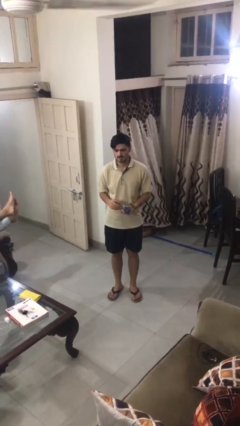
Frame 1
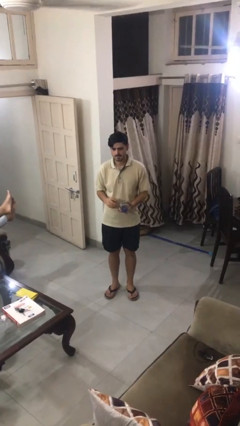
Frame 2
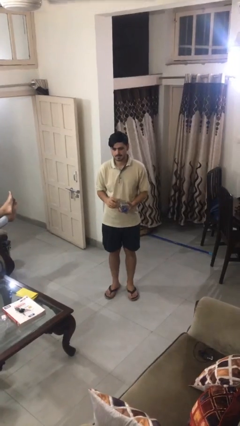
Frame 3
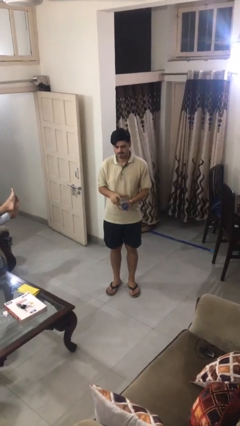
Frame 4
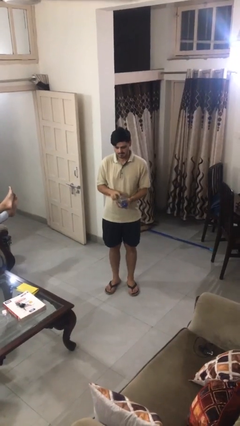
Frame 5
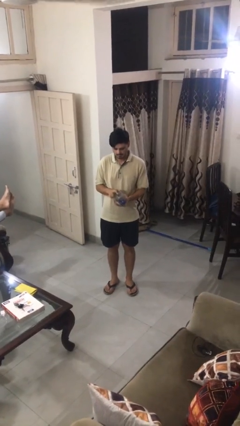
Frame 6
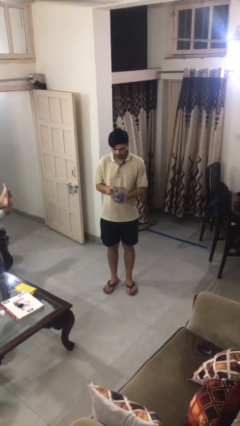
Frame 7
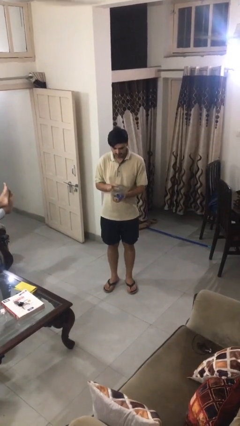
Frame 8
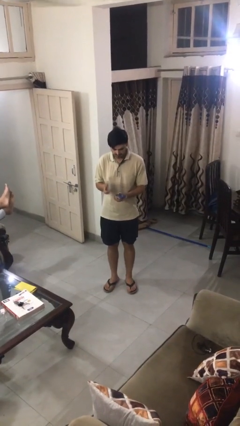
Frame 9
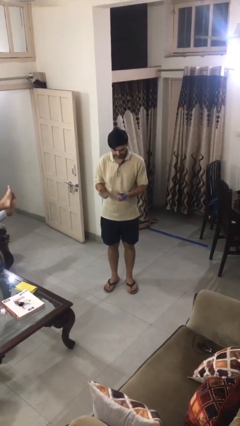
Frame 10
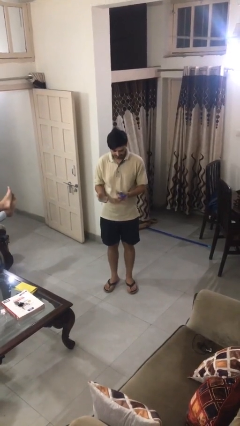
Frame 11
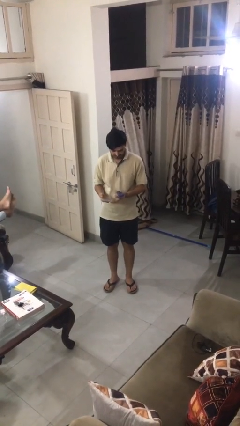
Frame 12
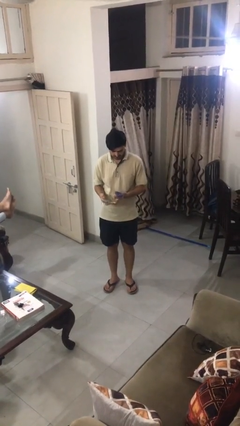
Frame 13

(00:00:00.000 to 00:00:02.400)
person opens jewelry box

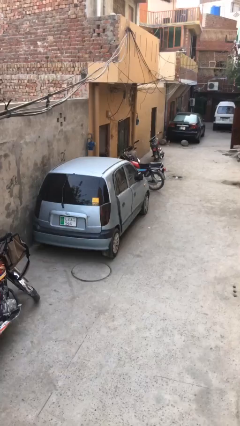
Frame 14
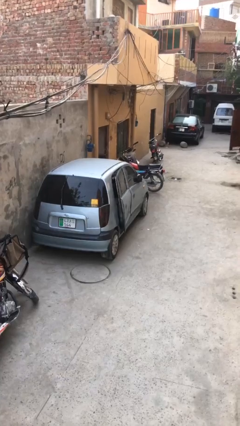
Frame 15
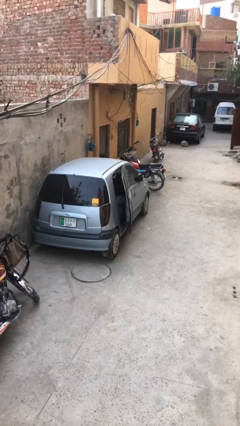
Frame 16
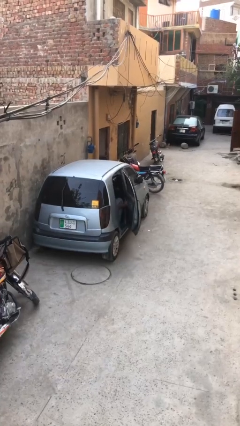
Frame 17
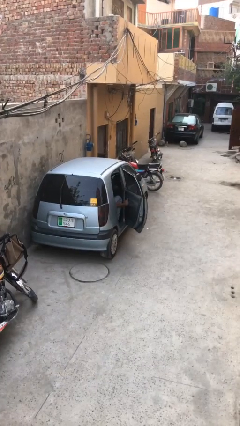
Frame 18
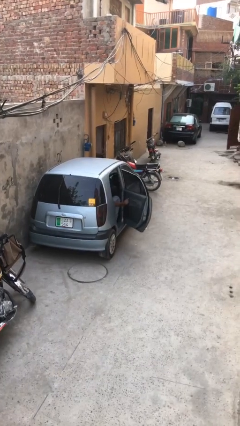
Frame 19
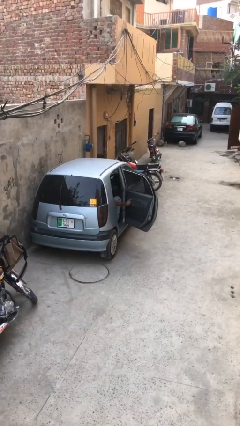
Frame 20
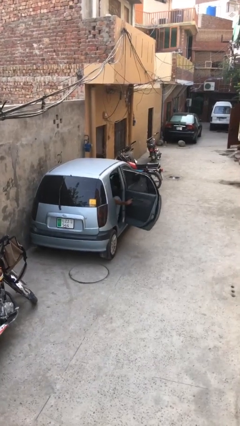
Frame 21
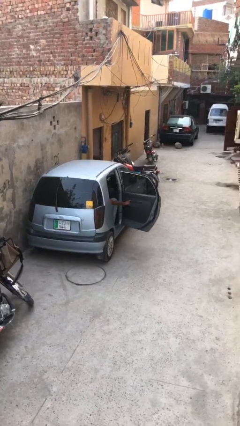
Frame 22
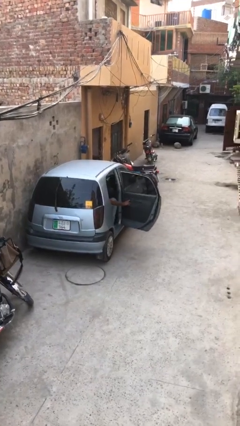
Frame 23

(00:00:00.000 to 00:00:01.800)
person opens car door

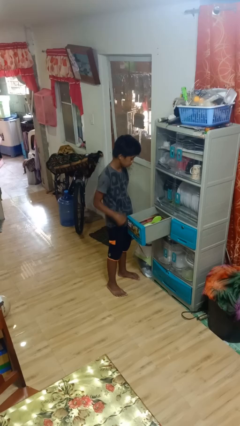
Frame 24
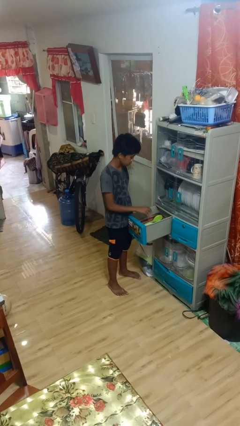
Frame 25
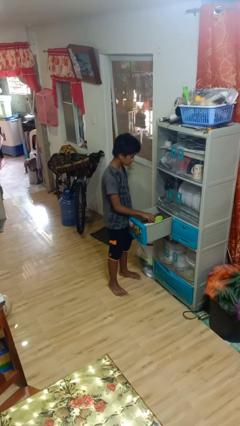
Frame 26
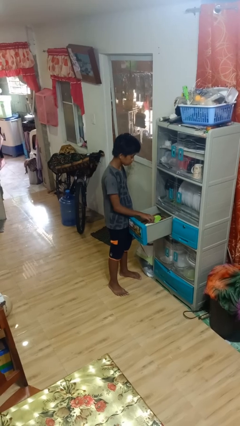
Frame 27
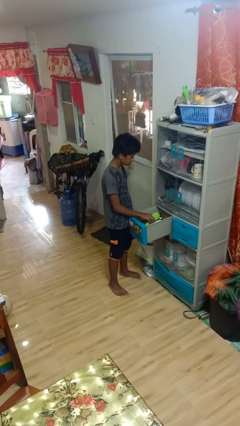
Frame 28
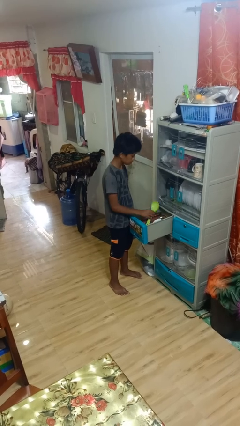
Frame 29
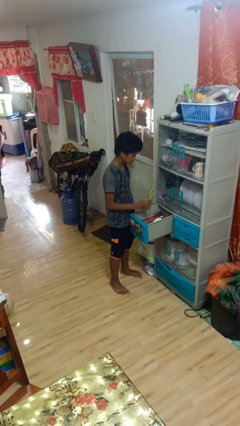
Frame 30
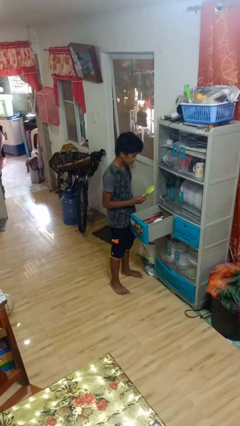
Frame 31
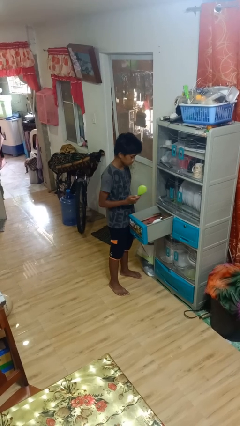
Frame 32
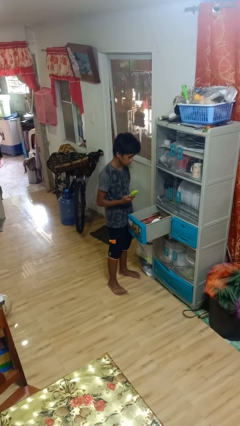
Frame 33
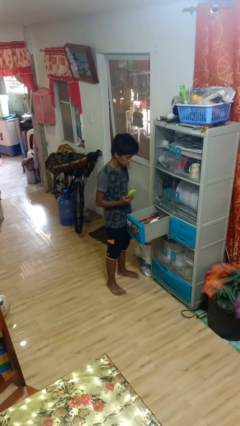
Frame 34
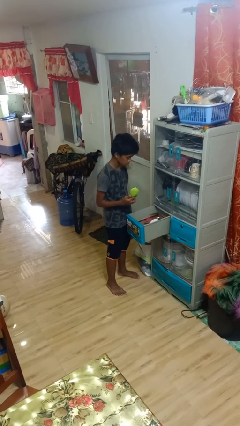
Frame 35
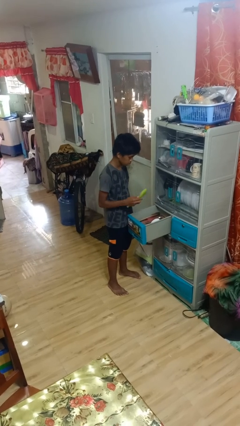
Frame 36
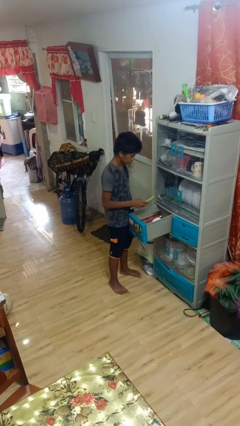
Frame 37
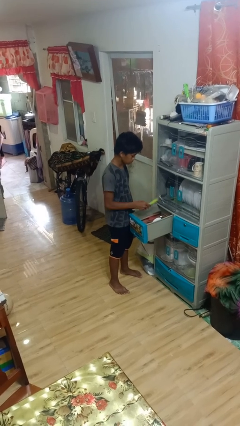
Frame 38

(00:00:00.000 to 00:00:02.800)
person takes object from kitchen drawer

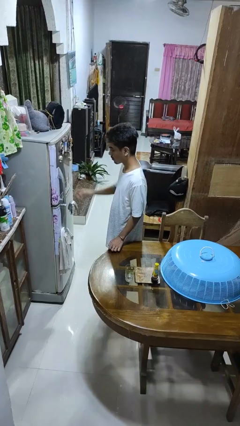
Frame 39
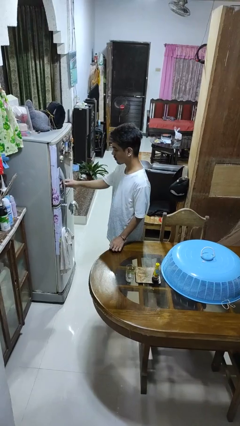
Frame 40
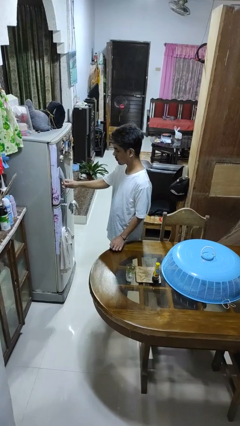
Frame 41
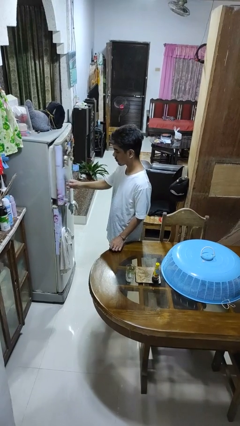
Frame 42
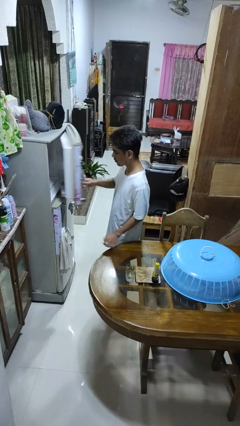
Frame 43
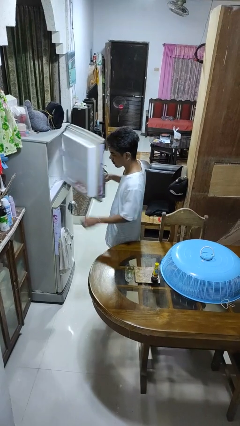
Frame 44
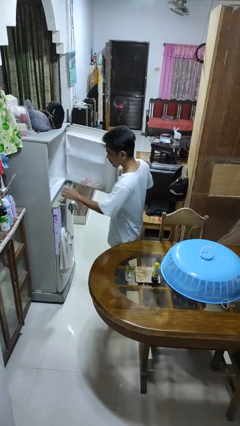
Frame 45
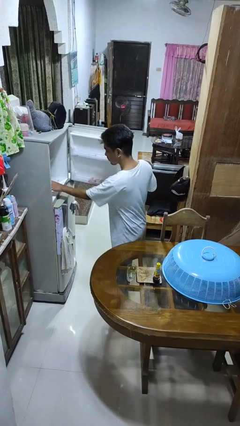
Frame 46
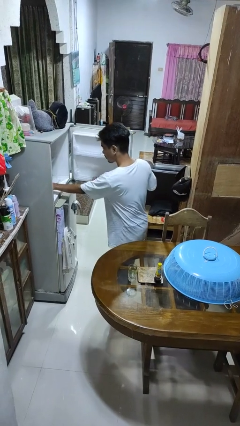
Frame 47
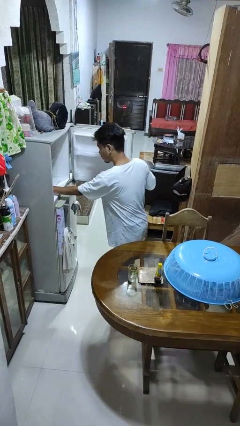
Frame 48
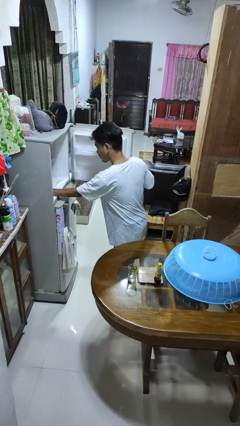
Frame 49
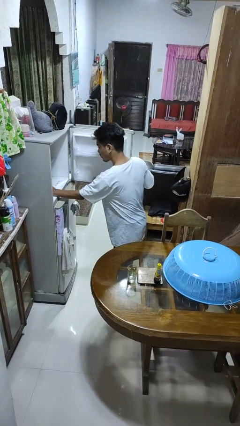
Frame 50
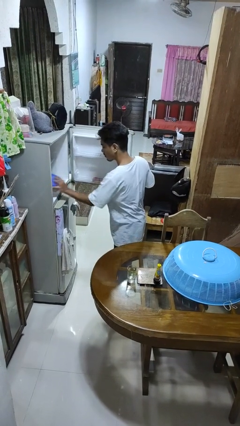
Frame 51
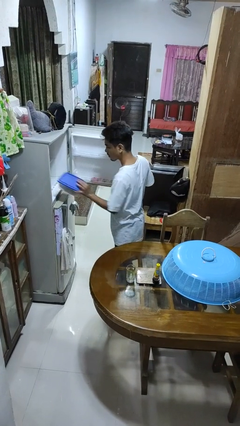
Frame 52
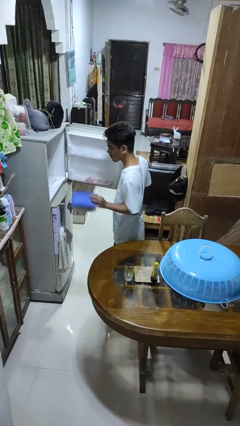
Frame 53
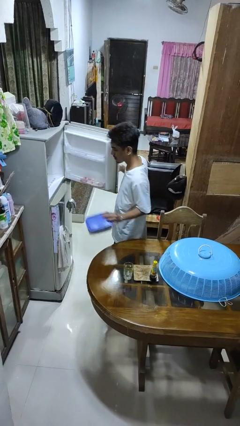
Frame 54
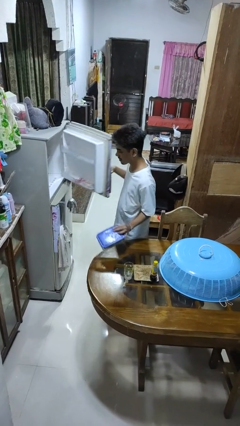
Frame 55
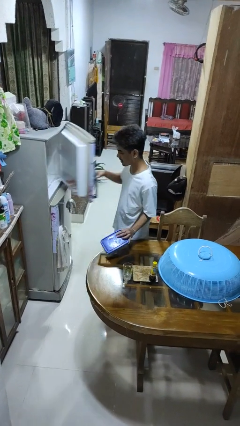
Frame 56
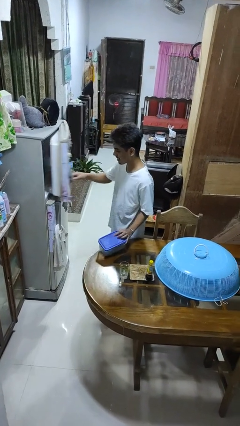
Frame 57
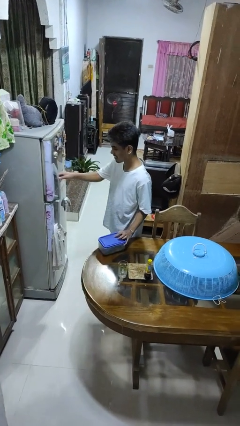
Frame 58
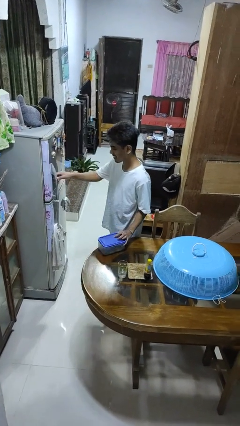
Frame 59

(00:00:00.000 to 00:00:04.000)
person takes object from refrigerator

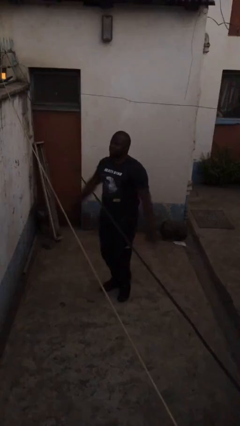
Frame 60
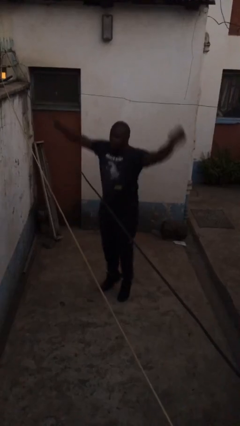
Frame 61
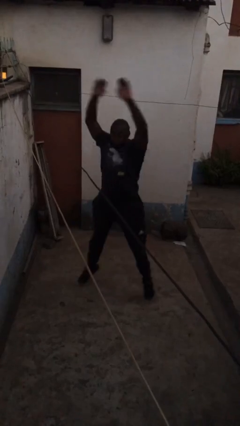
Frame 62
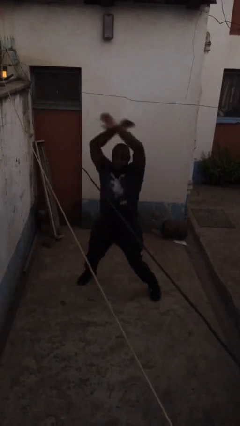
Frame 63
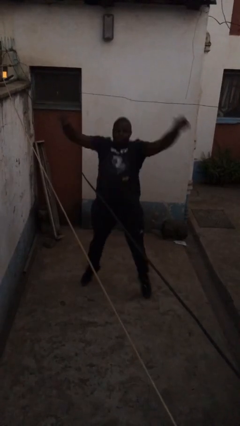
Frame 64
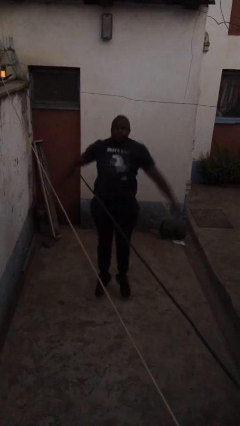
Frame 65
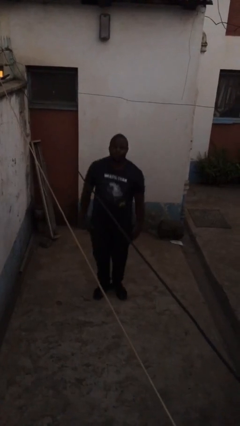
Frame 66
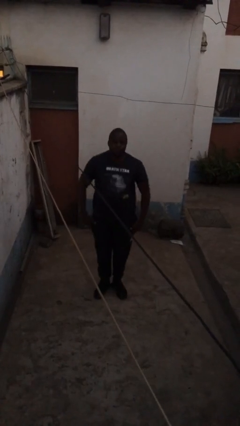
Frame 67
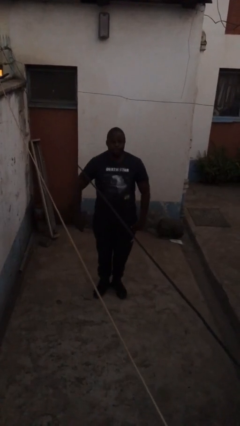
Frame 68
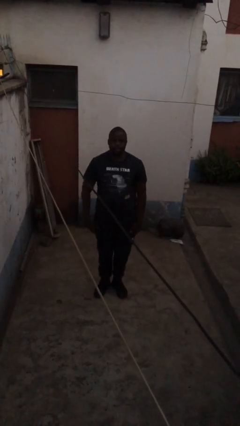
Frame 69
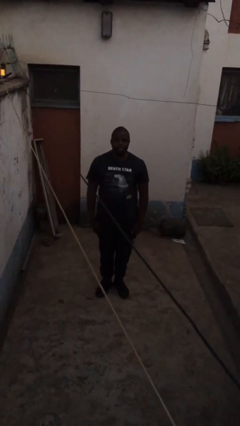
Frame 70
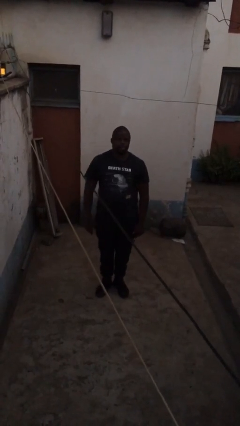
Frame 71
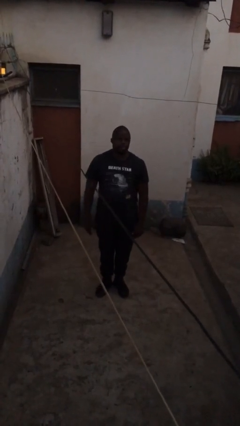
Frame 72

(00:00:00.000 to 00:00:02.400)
person exercises with jumping jacks

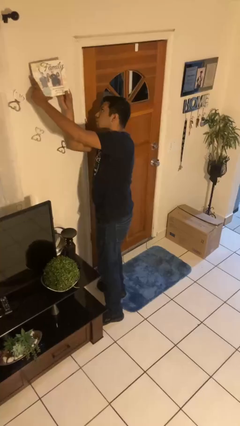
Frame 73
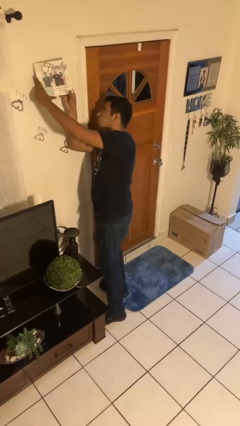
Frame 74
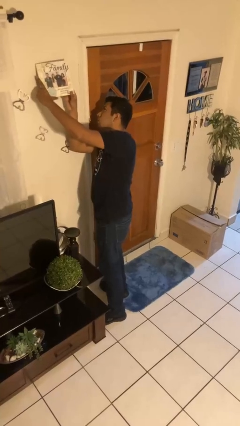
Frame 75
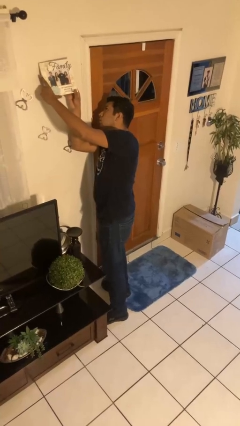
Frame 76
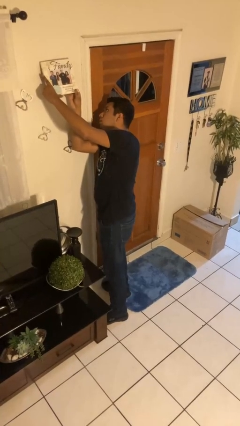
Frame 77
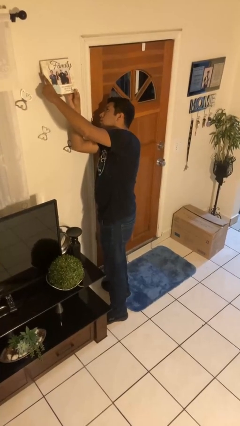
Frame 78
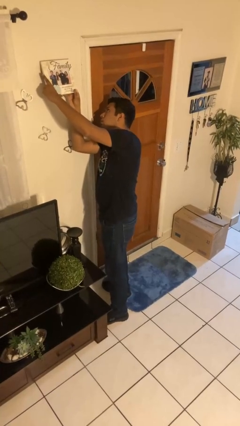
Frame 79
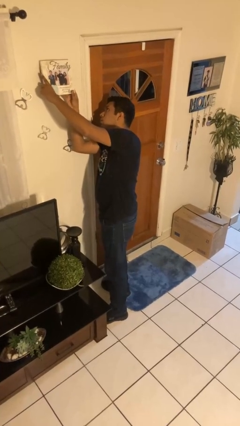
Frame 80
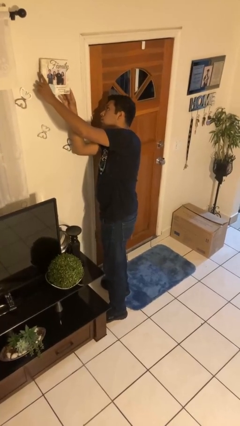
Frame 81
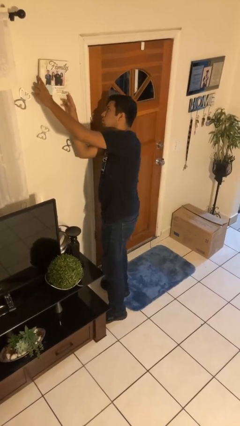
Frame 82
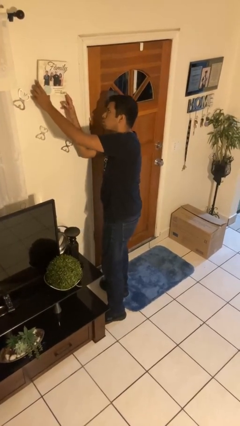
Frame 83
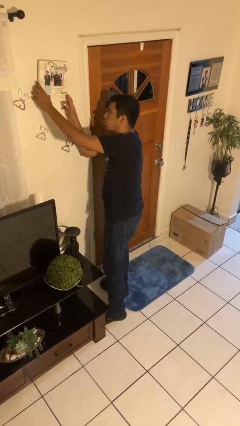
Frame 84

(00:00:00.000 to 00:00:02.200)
person puts up picture frame

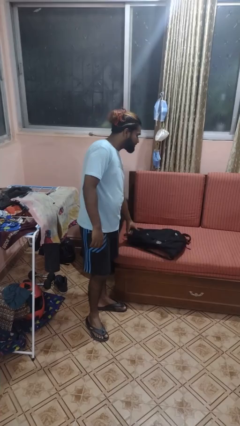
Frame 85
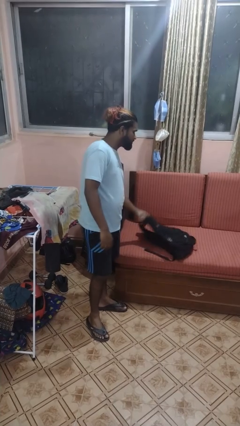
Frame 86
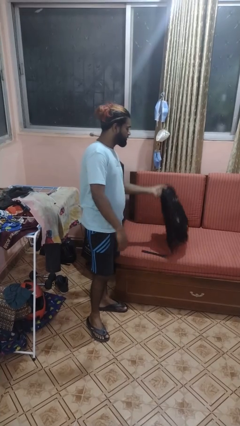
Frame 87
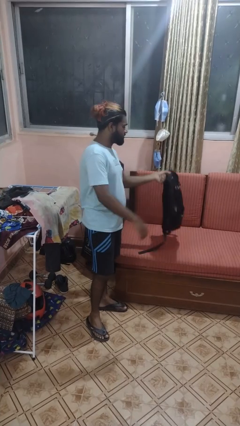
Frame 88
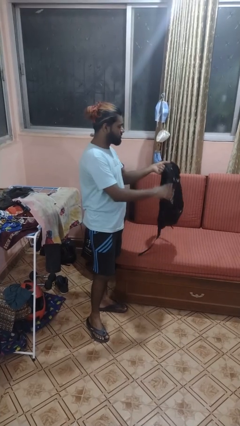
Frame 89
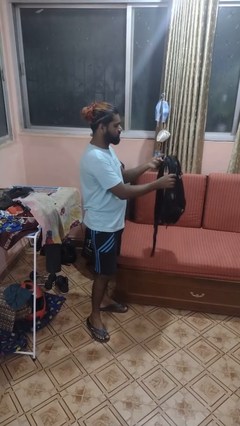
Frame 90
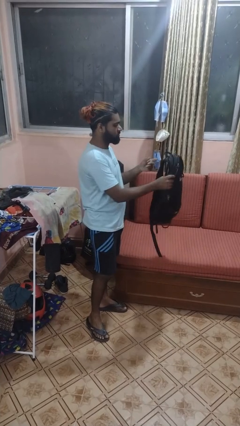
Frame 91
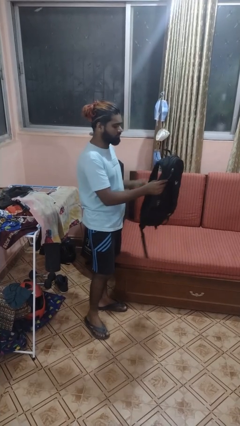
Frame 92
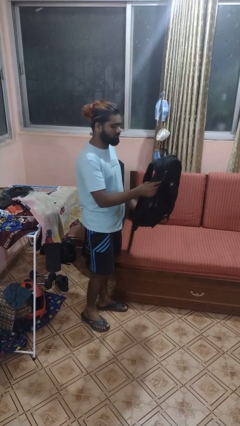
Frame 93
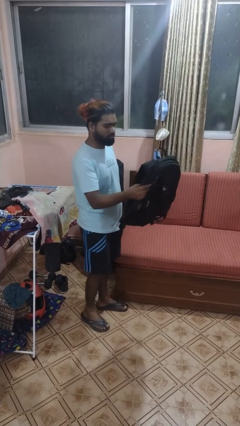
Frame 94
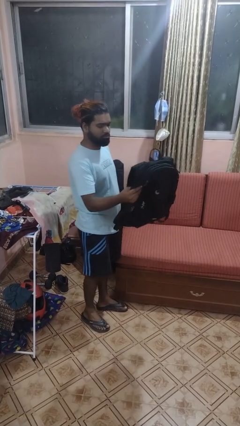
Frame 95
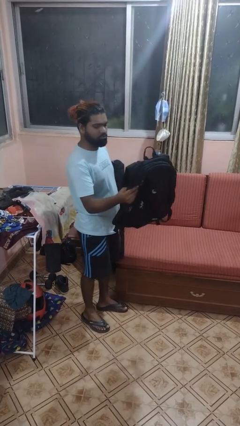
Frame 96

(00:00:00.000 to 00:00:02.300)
person picks up object from couch
